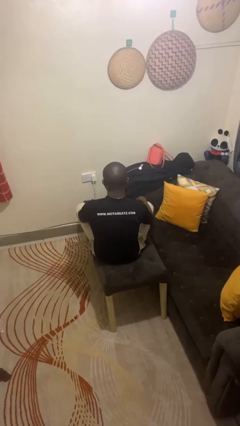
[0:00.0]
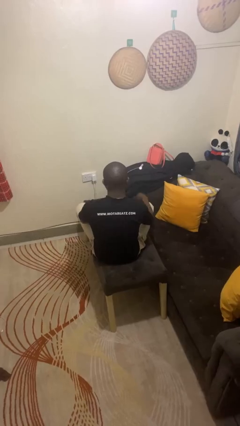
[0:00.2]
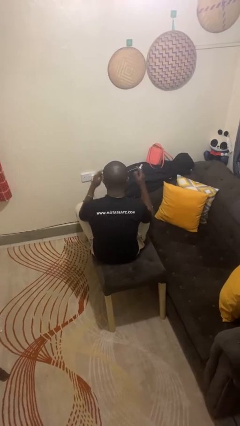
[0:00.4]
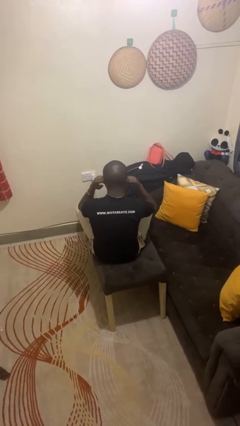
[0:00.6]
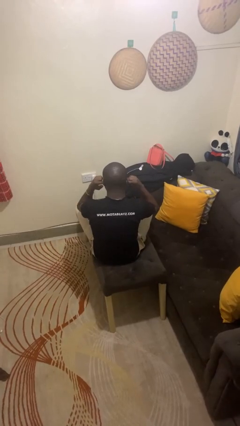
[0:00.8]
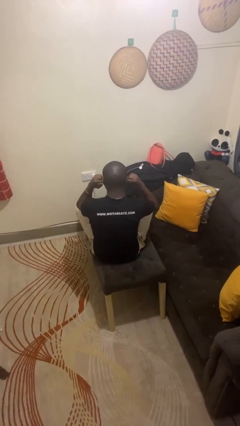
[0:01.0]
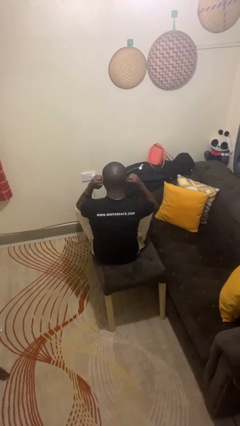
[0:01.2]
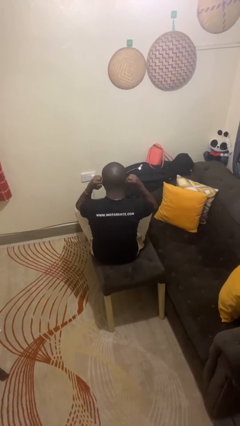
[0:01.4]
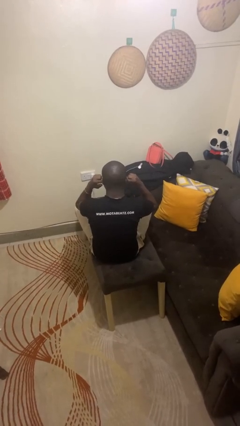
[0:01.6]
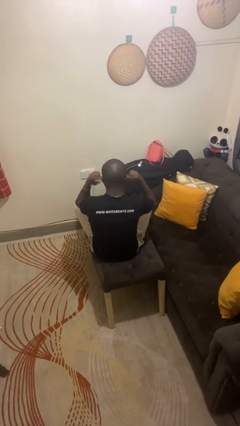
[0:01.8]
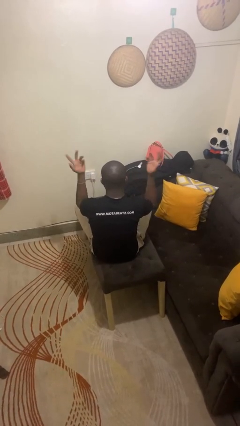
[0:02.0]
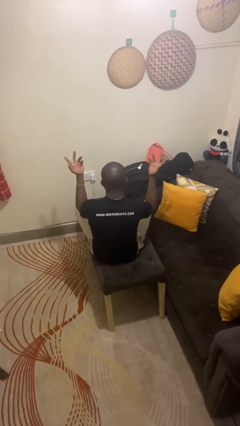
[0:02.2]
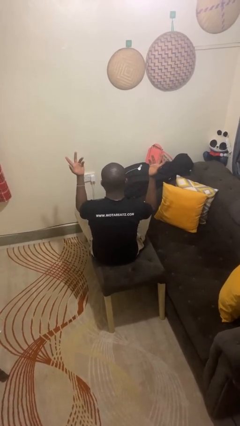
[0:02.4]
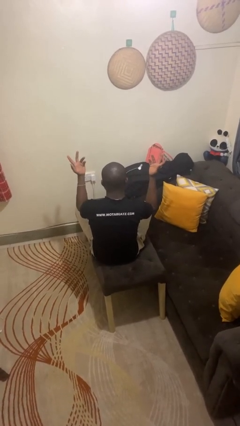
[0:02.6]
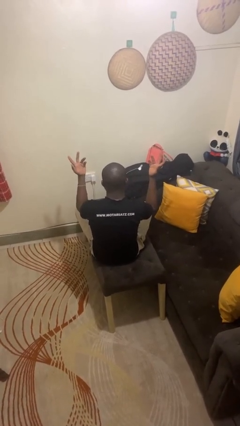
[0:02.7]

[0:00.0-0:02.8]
person puts fingers in ear

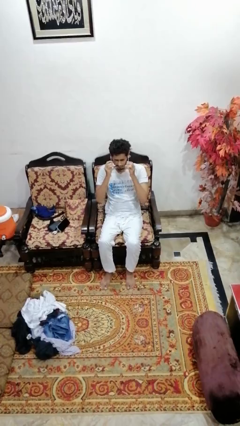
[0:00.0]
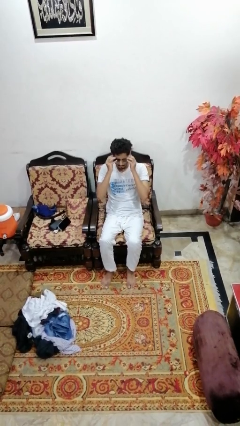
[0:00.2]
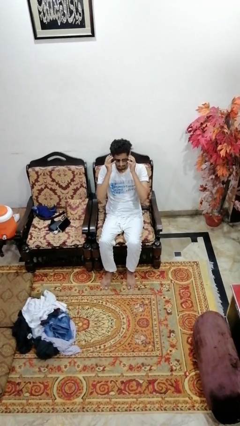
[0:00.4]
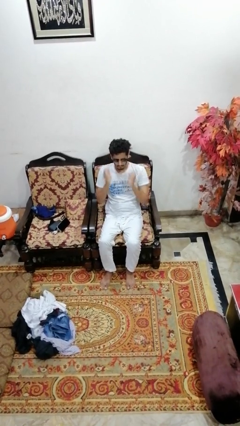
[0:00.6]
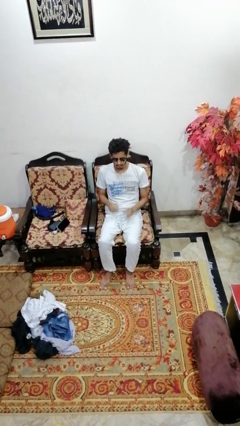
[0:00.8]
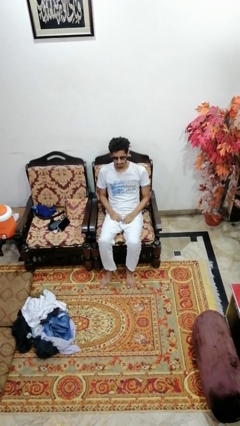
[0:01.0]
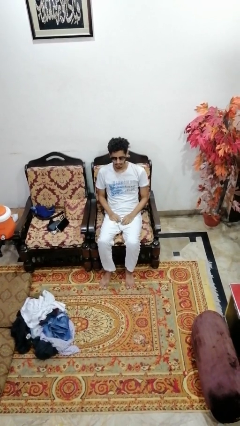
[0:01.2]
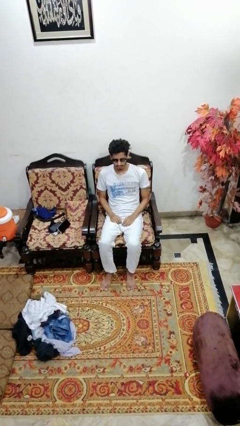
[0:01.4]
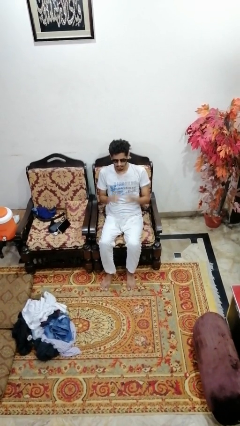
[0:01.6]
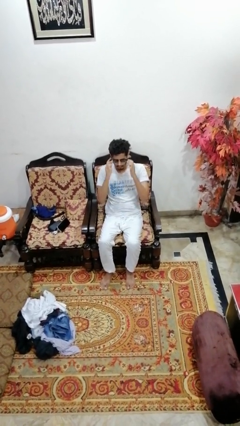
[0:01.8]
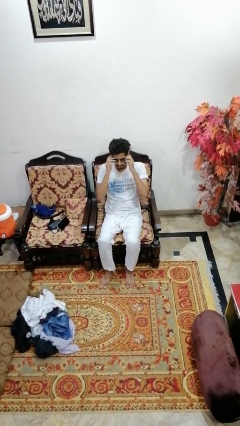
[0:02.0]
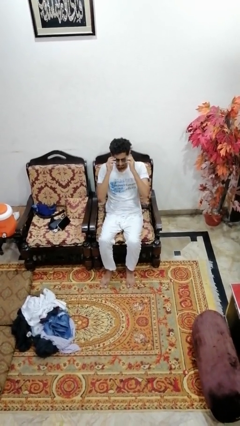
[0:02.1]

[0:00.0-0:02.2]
person puts on sunglasses

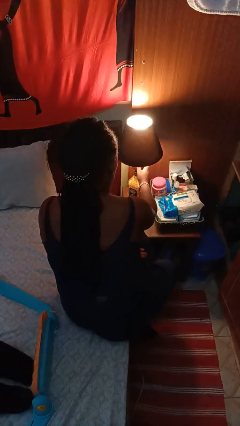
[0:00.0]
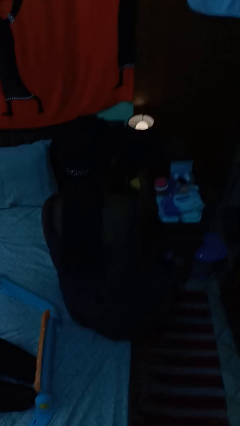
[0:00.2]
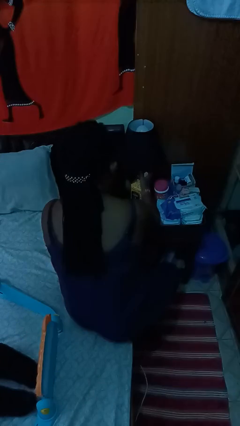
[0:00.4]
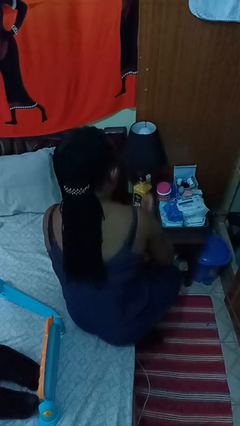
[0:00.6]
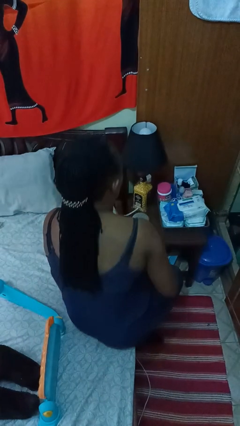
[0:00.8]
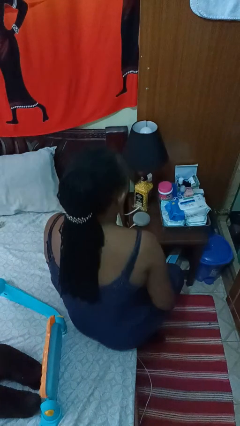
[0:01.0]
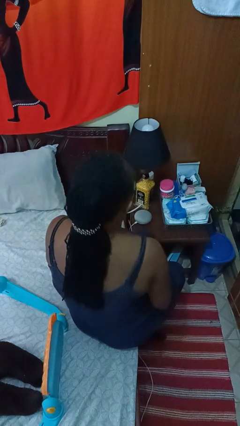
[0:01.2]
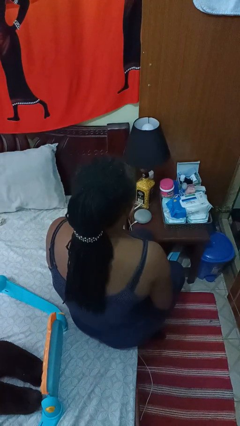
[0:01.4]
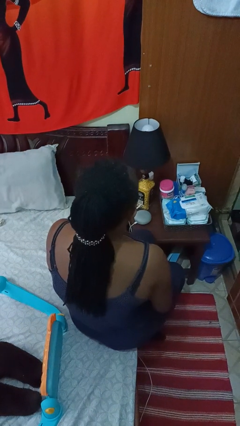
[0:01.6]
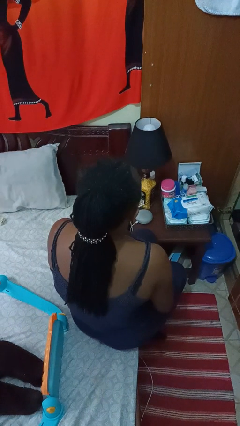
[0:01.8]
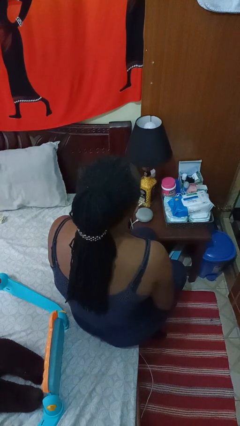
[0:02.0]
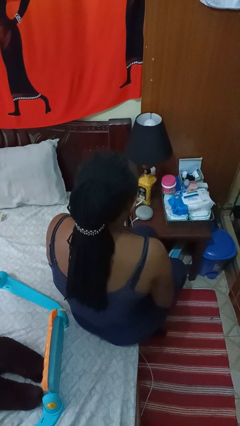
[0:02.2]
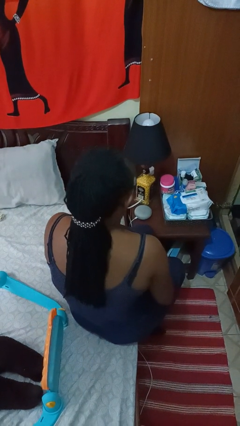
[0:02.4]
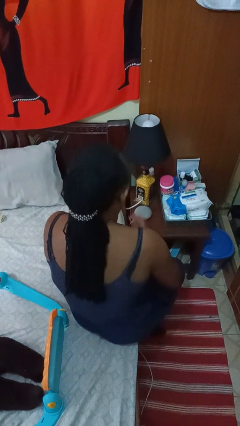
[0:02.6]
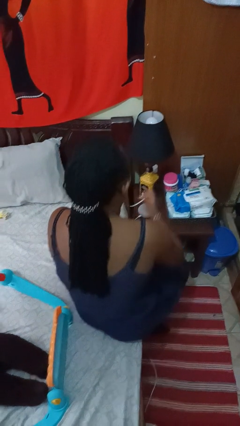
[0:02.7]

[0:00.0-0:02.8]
person turns off lamp

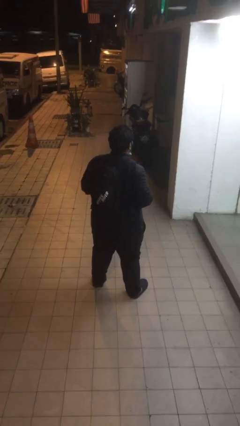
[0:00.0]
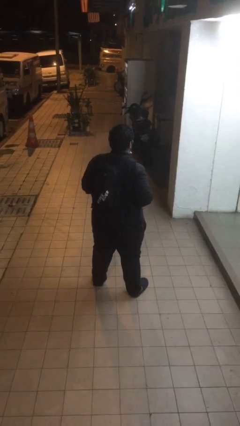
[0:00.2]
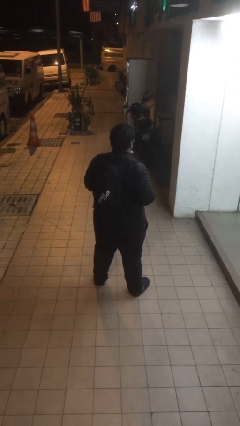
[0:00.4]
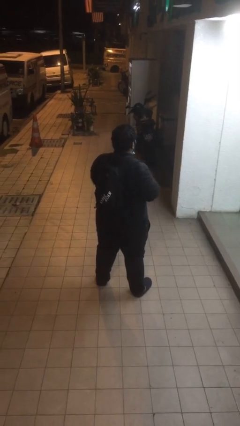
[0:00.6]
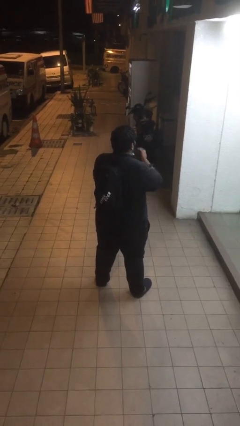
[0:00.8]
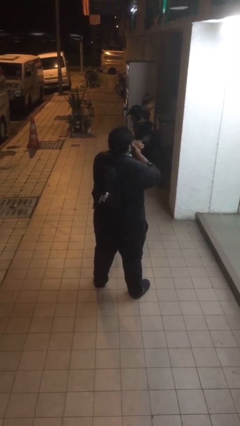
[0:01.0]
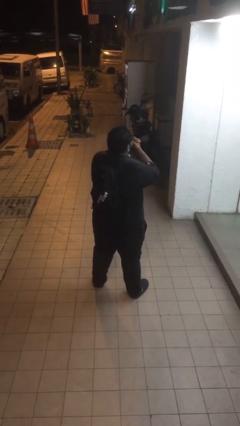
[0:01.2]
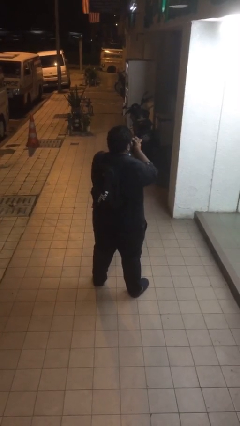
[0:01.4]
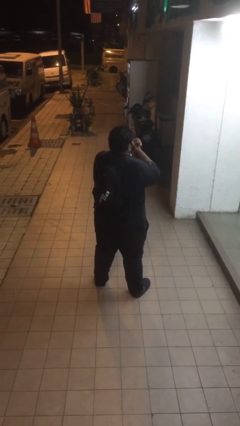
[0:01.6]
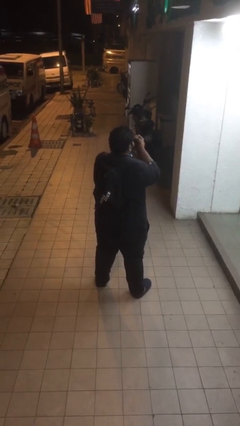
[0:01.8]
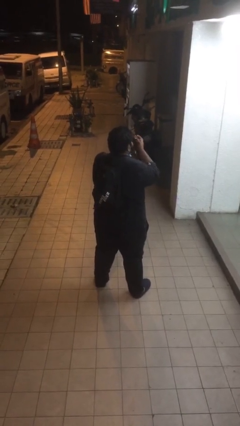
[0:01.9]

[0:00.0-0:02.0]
person blows into hands

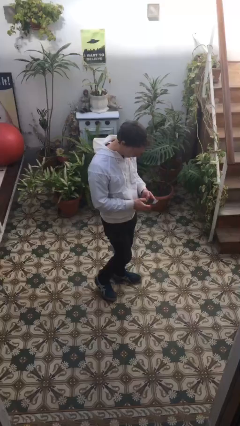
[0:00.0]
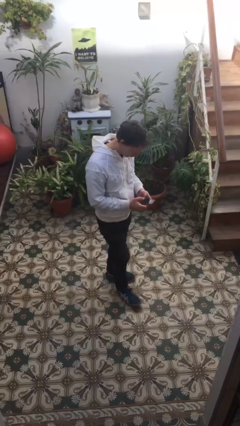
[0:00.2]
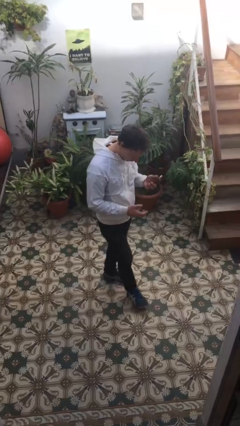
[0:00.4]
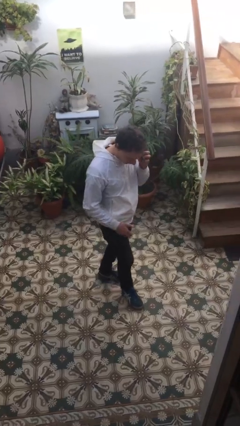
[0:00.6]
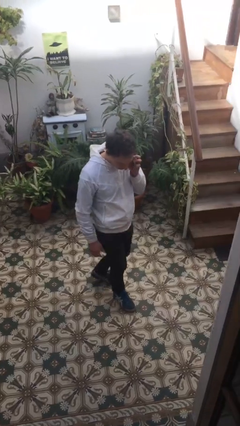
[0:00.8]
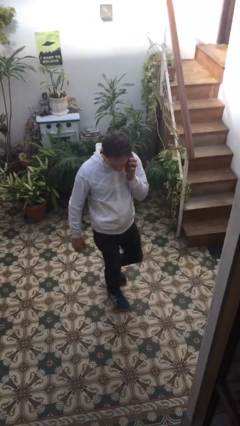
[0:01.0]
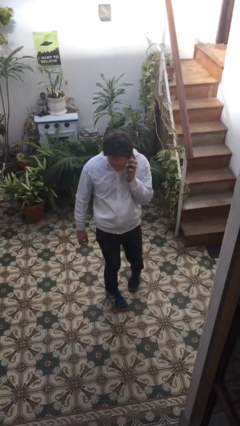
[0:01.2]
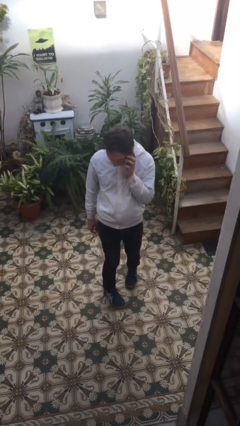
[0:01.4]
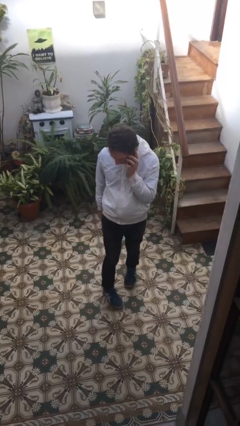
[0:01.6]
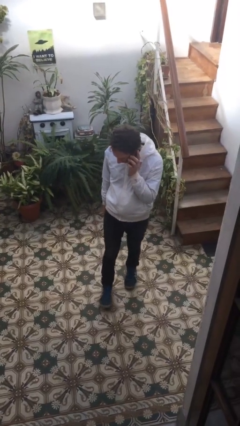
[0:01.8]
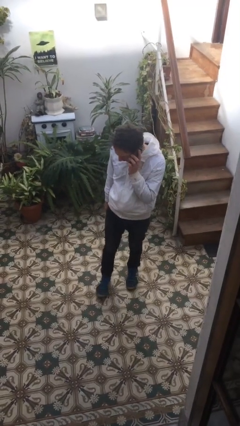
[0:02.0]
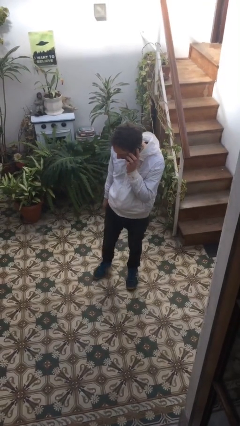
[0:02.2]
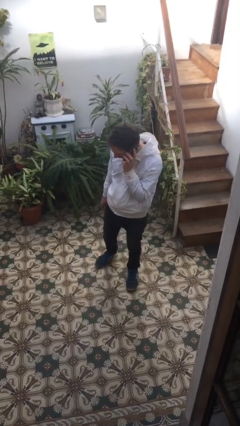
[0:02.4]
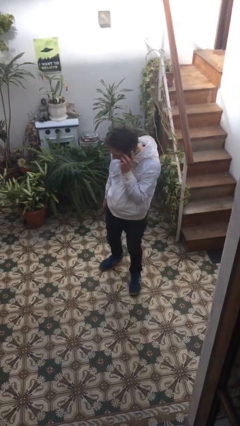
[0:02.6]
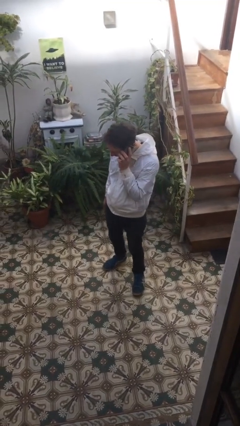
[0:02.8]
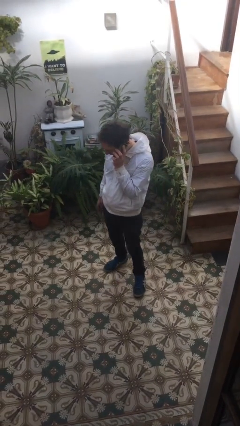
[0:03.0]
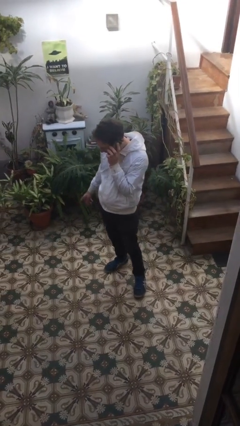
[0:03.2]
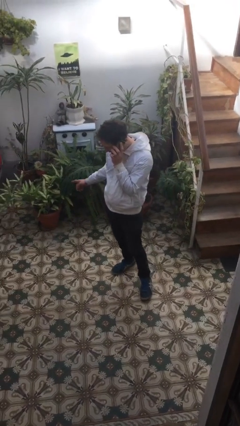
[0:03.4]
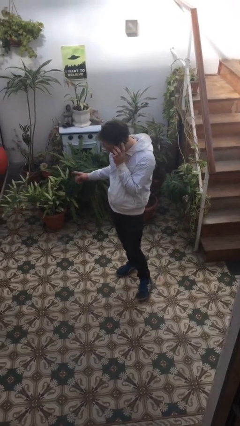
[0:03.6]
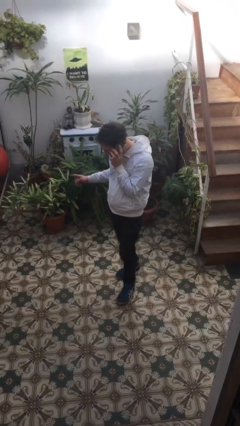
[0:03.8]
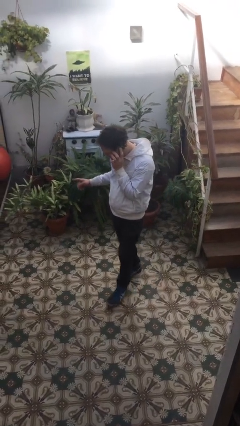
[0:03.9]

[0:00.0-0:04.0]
person talks on phone

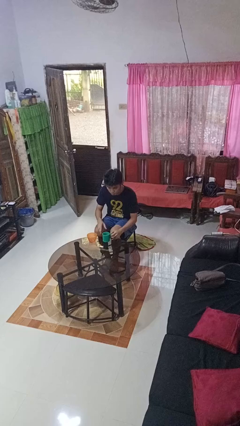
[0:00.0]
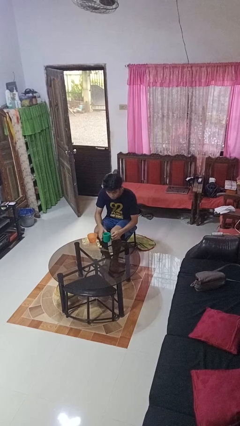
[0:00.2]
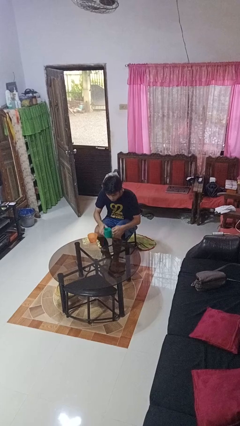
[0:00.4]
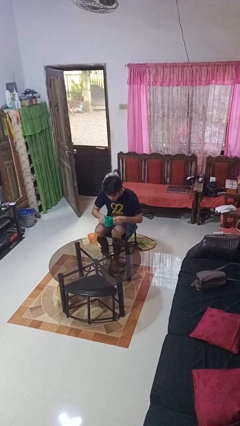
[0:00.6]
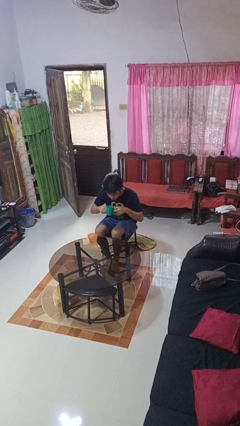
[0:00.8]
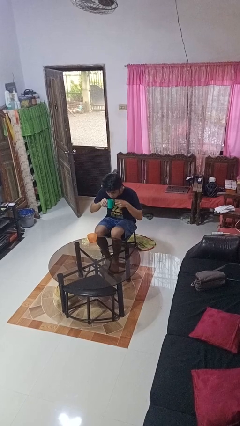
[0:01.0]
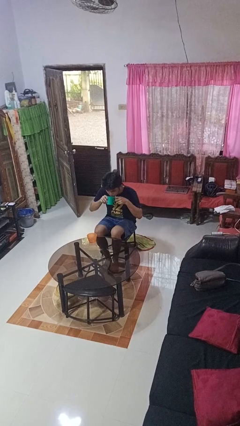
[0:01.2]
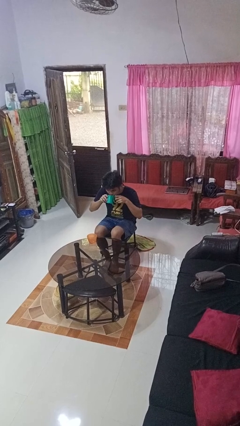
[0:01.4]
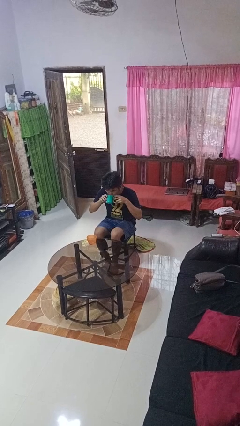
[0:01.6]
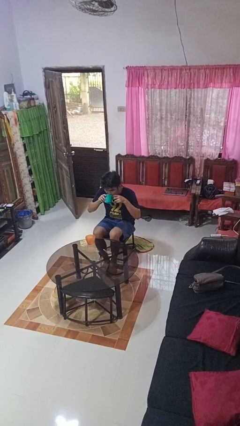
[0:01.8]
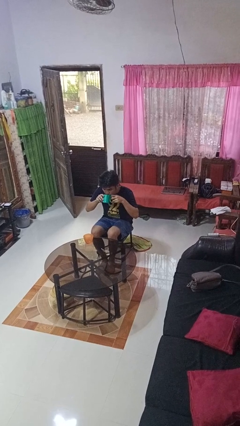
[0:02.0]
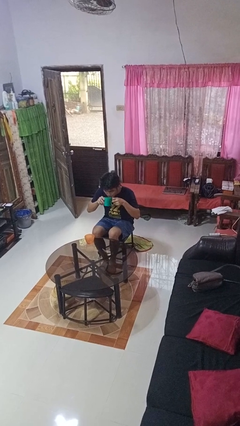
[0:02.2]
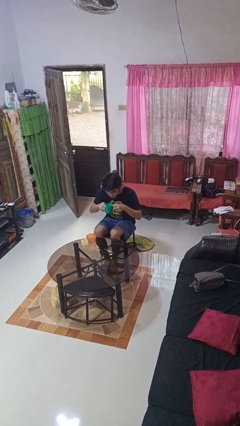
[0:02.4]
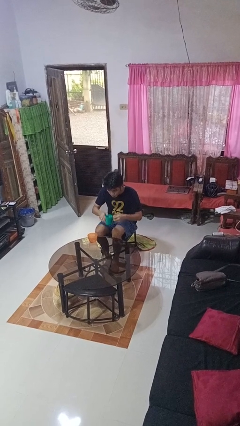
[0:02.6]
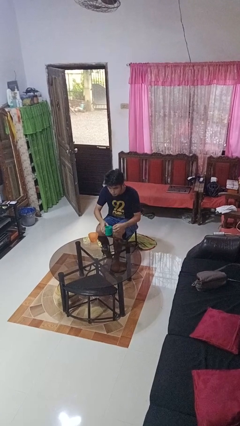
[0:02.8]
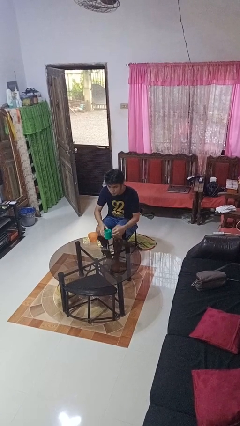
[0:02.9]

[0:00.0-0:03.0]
person drinks from cup
